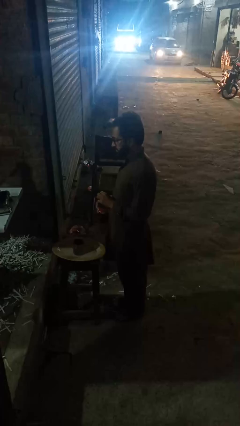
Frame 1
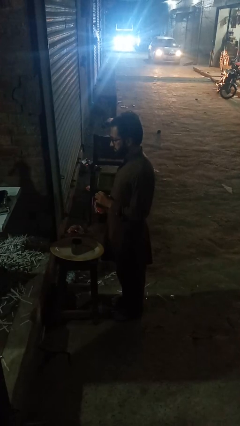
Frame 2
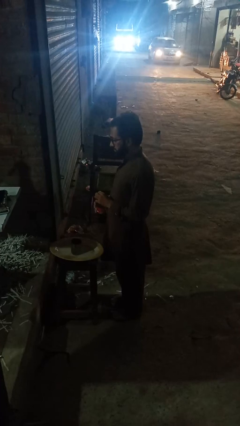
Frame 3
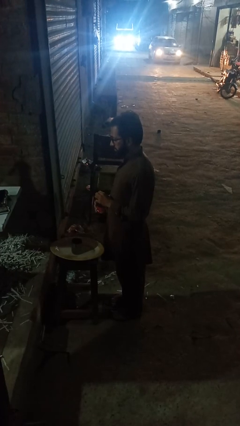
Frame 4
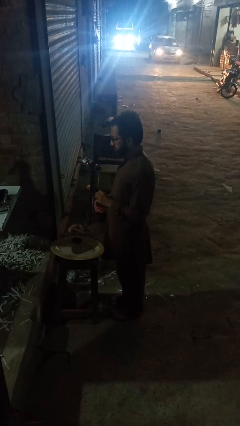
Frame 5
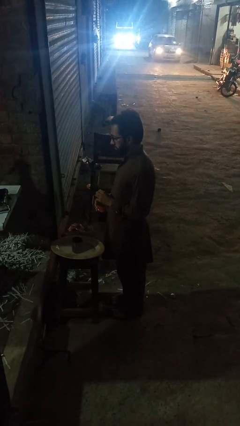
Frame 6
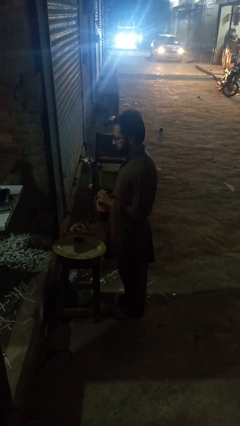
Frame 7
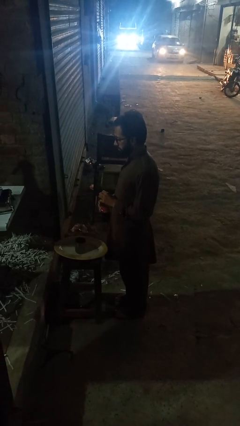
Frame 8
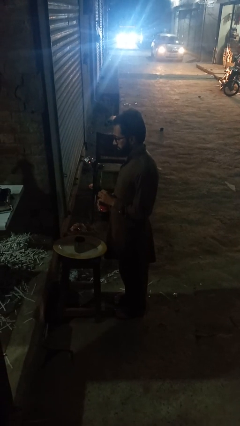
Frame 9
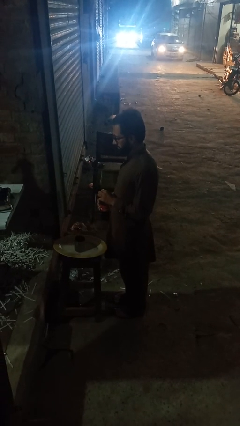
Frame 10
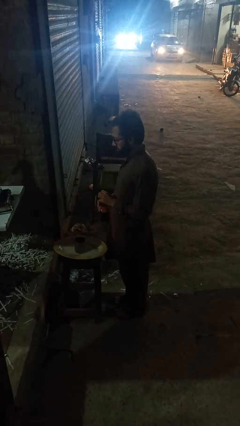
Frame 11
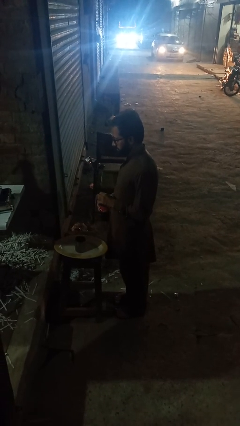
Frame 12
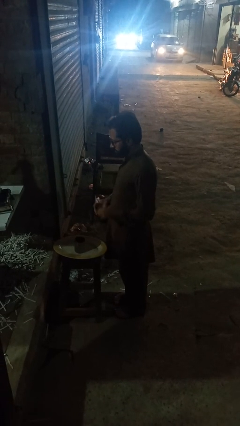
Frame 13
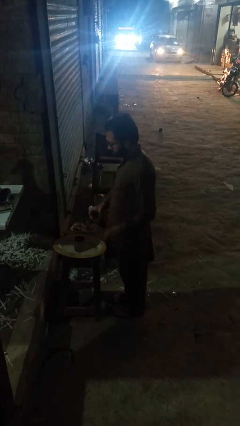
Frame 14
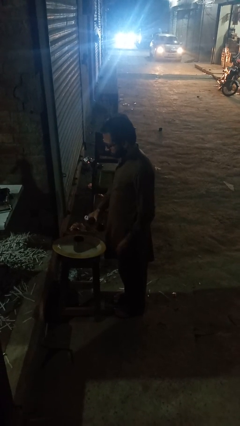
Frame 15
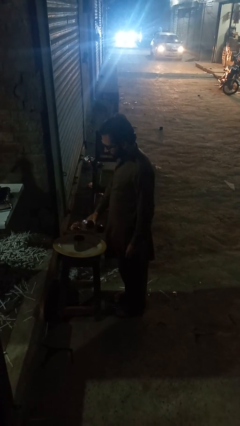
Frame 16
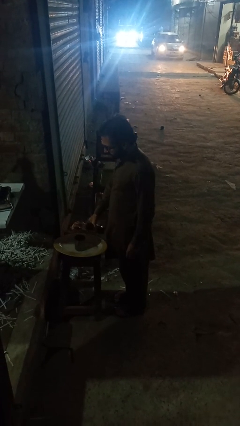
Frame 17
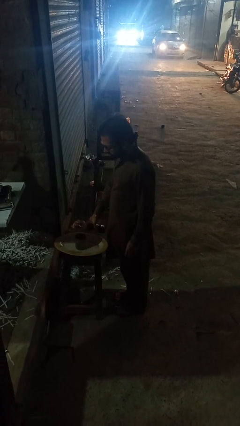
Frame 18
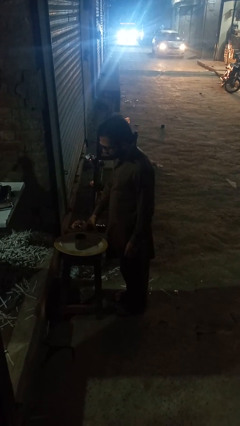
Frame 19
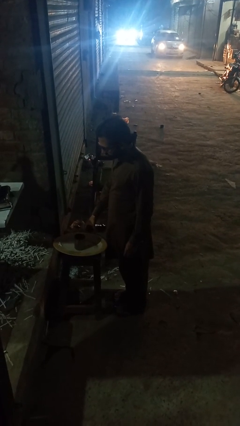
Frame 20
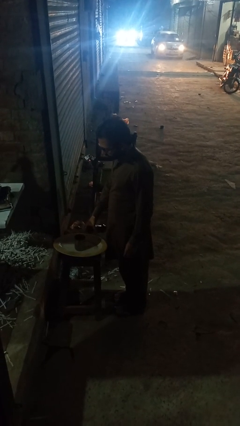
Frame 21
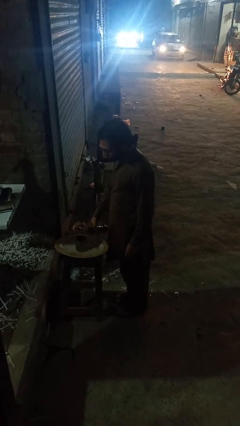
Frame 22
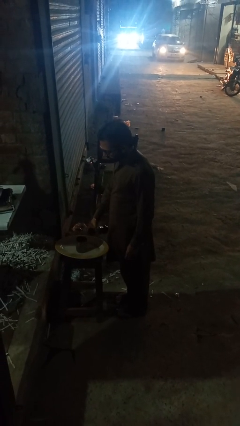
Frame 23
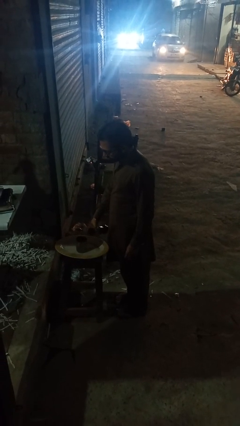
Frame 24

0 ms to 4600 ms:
person pours liquid into cup

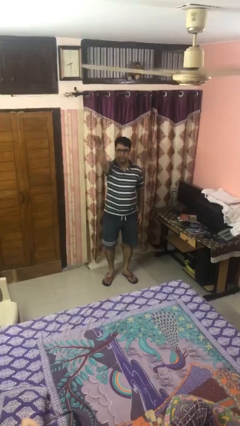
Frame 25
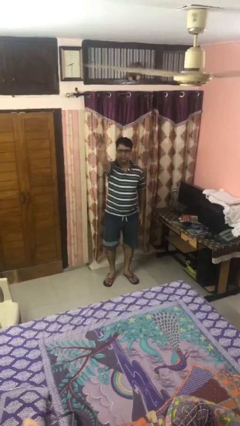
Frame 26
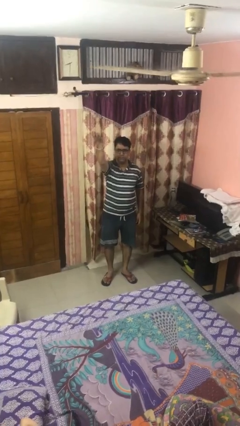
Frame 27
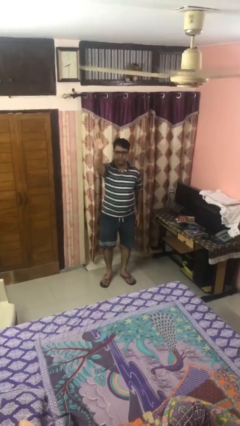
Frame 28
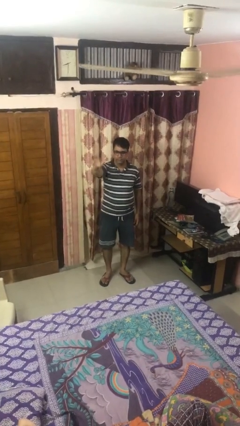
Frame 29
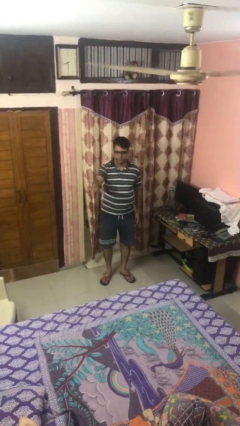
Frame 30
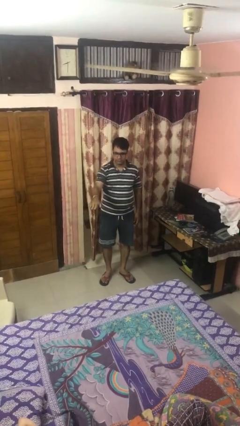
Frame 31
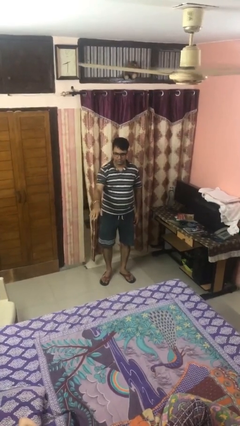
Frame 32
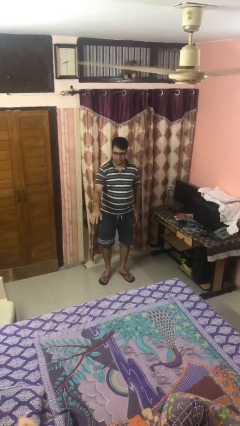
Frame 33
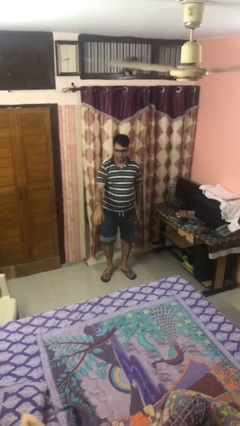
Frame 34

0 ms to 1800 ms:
person gestures swipe down

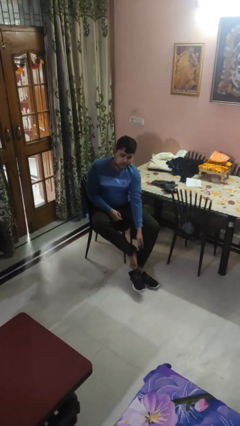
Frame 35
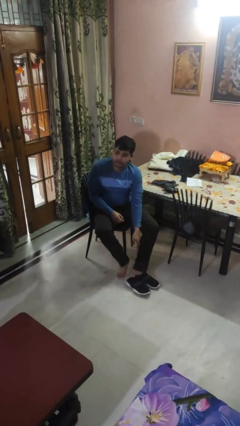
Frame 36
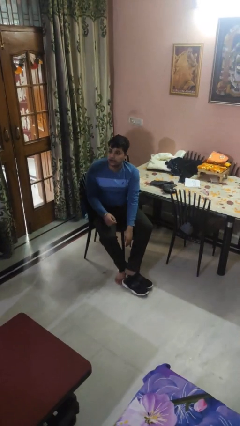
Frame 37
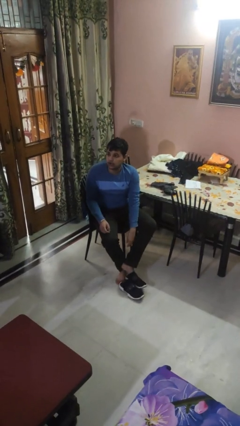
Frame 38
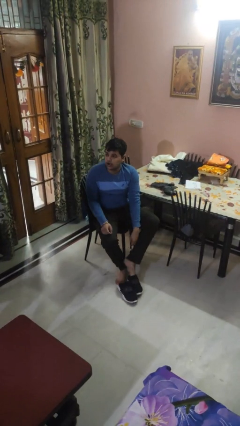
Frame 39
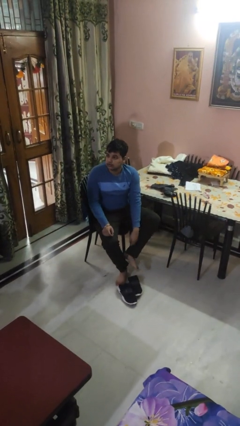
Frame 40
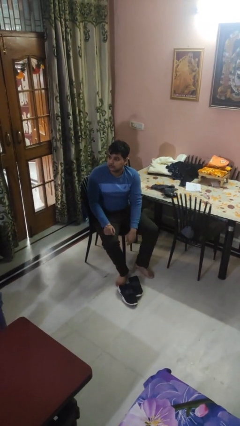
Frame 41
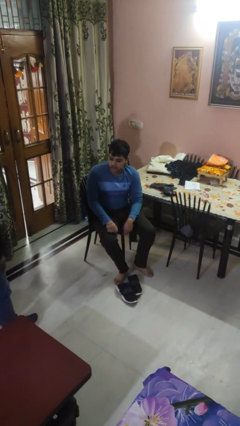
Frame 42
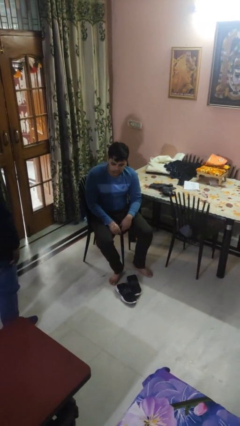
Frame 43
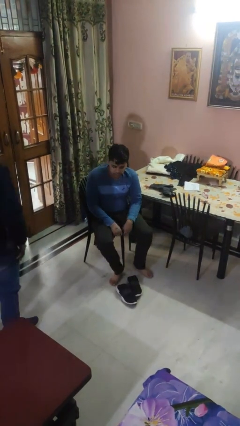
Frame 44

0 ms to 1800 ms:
person takes off shoes

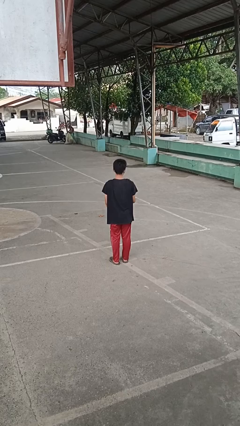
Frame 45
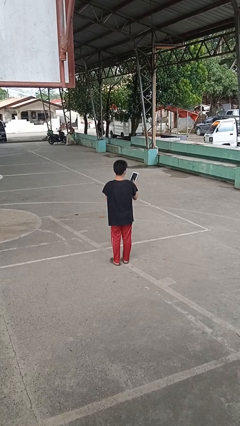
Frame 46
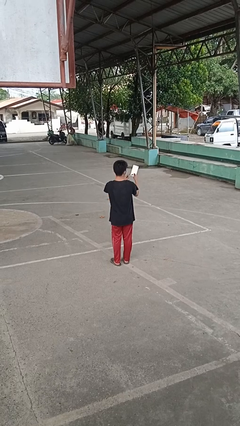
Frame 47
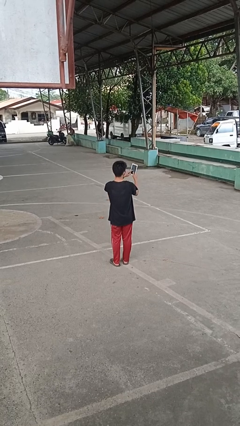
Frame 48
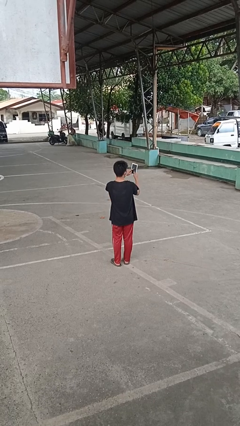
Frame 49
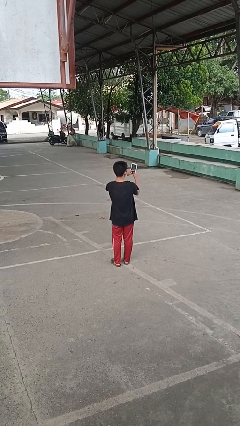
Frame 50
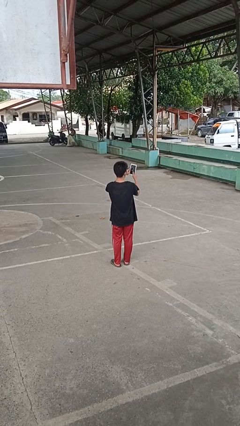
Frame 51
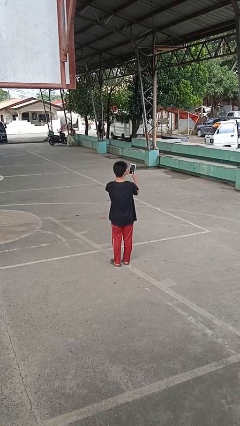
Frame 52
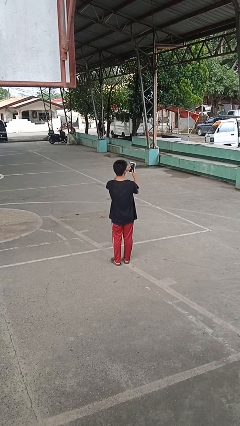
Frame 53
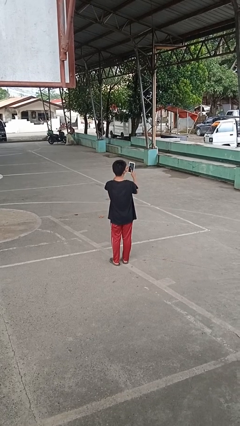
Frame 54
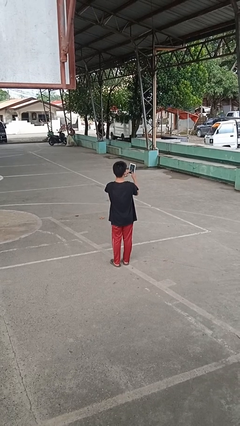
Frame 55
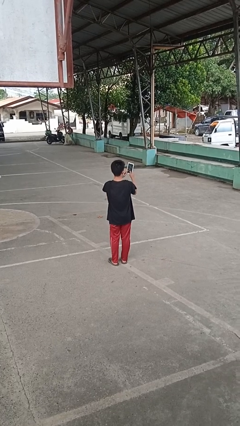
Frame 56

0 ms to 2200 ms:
person interacts with tablet

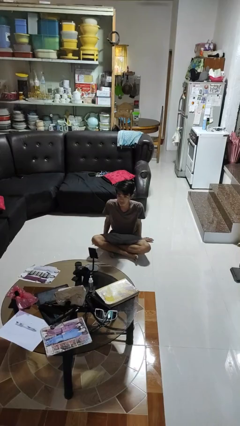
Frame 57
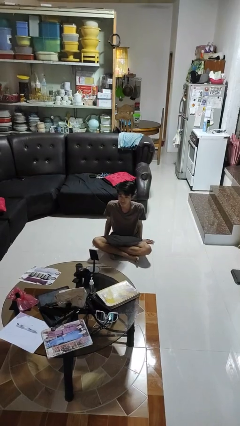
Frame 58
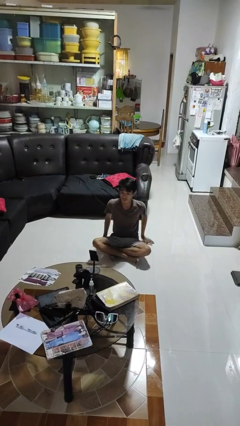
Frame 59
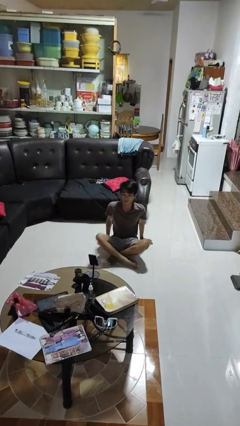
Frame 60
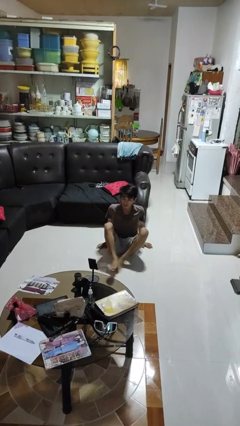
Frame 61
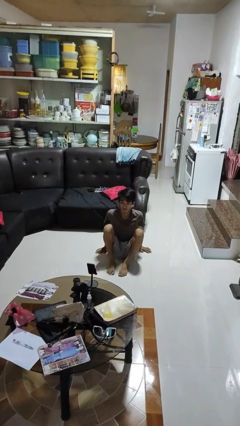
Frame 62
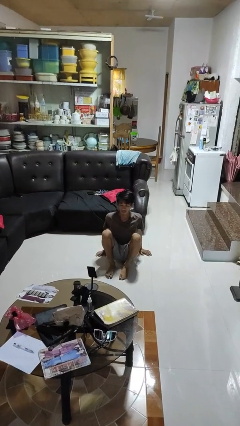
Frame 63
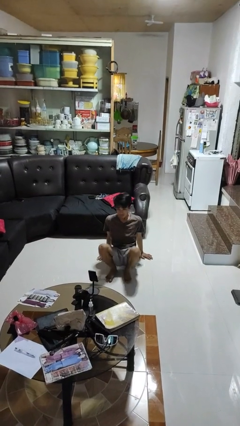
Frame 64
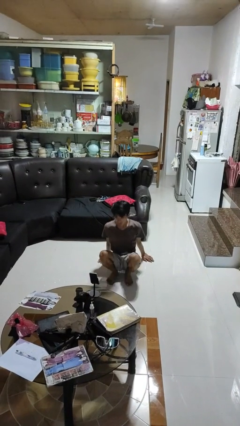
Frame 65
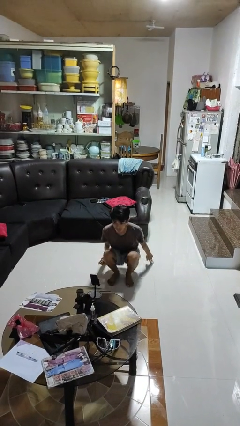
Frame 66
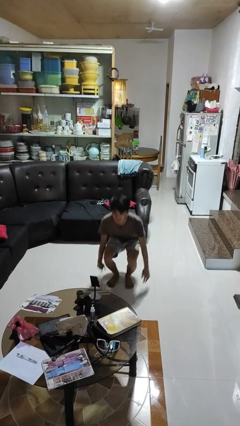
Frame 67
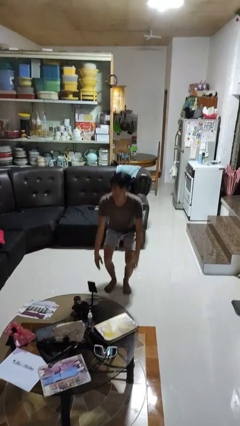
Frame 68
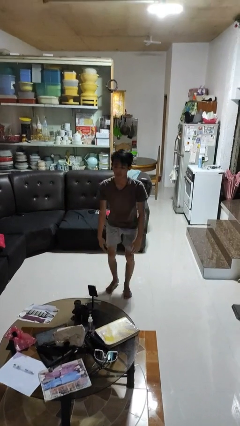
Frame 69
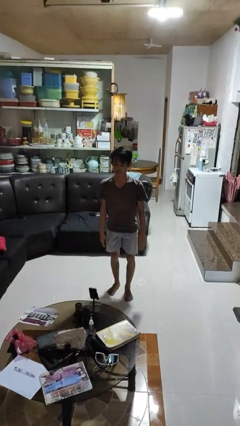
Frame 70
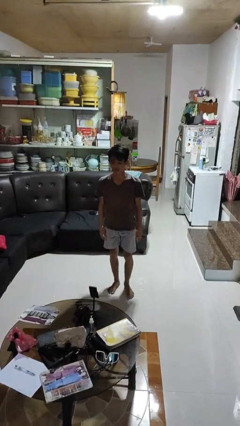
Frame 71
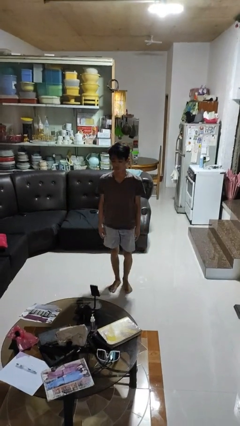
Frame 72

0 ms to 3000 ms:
person stands up from floor

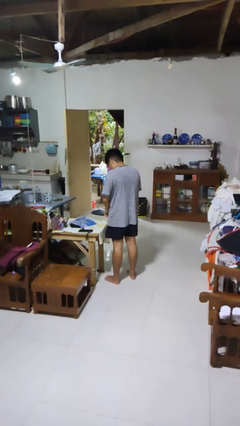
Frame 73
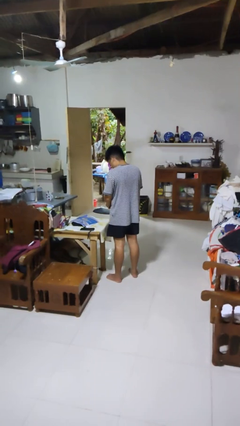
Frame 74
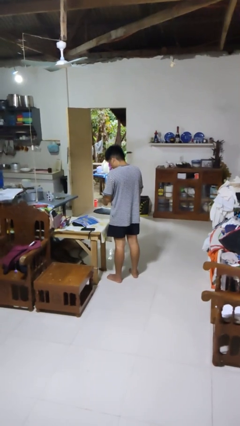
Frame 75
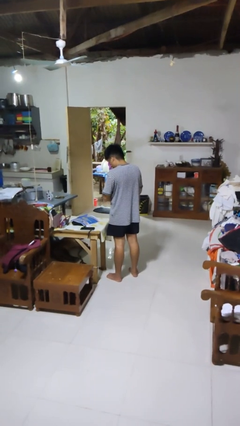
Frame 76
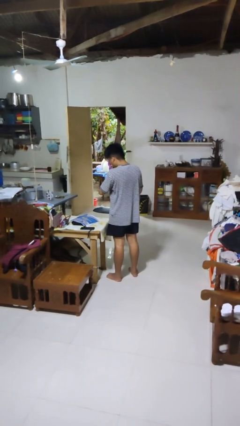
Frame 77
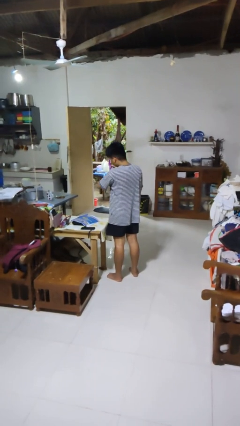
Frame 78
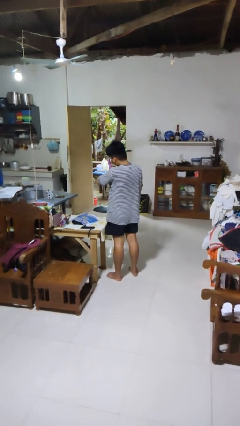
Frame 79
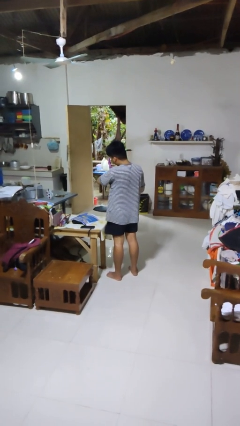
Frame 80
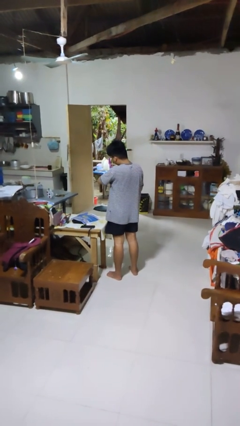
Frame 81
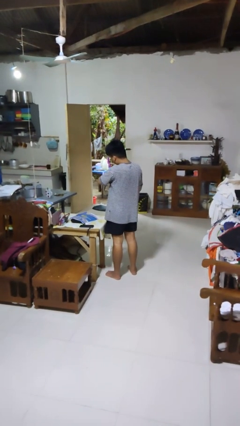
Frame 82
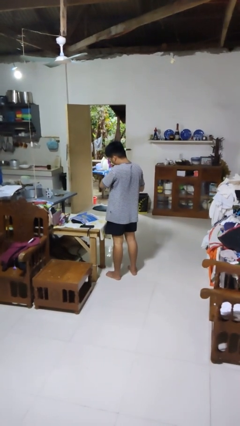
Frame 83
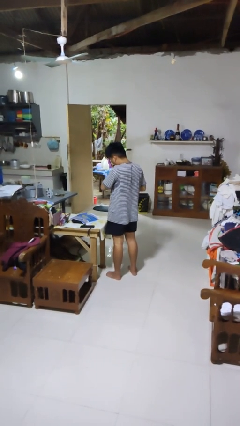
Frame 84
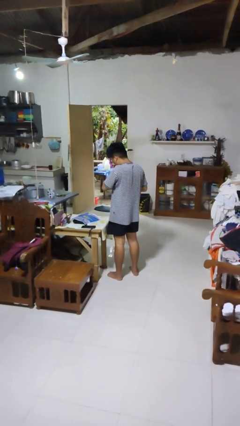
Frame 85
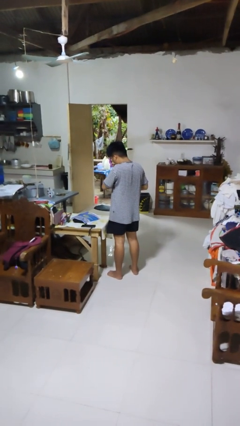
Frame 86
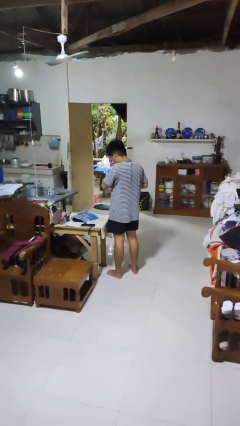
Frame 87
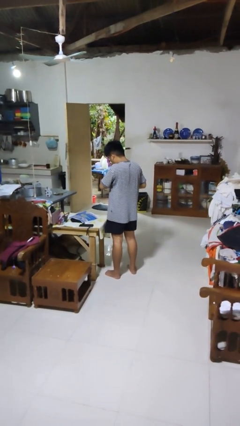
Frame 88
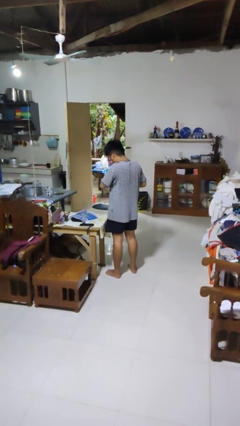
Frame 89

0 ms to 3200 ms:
person looks at wristwatch

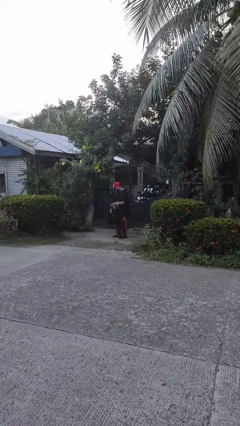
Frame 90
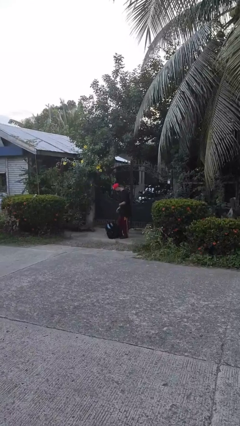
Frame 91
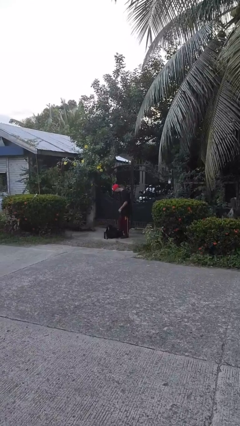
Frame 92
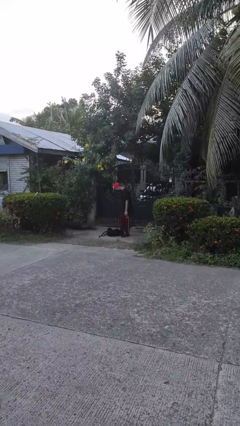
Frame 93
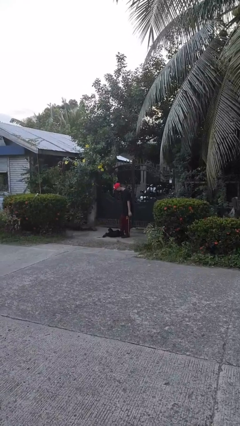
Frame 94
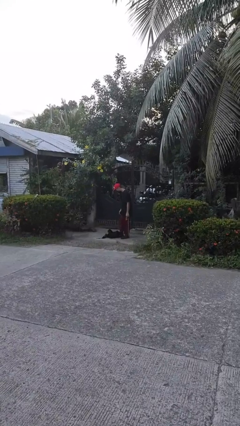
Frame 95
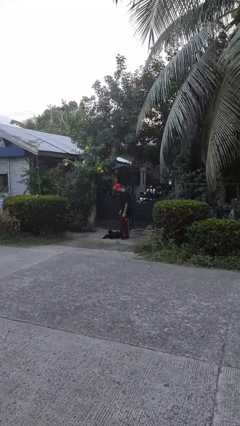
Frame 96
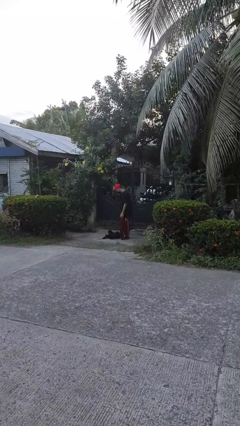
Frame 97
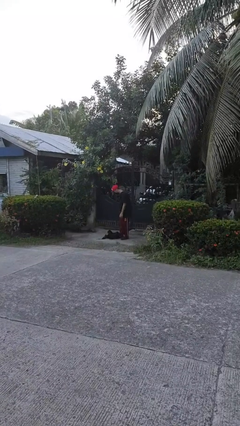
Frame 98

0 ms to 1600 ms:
person drops object
